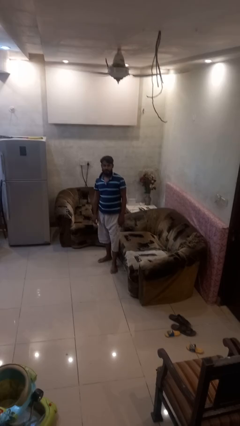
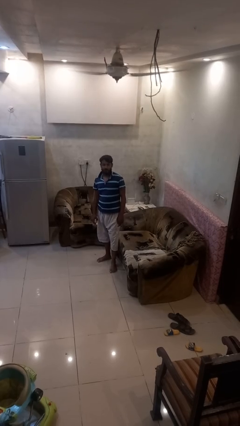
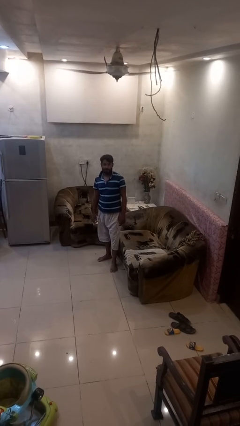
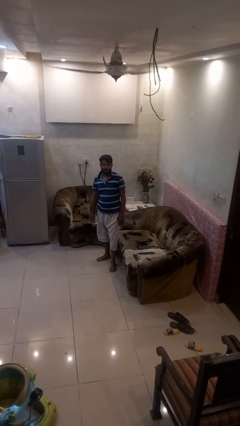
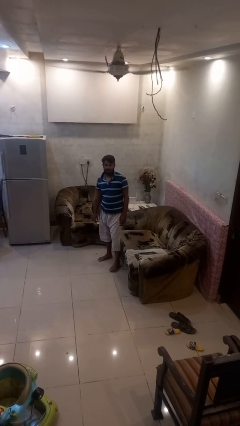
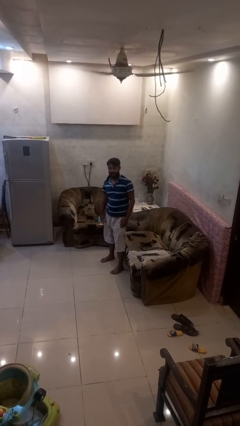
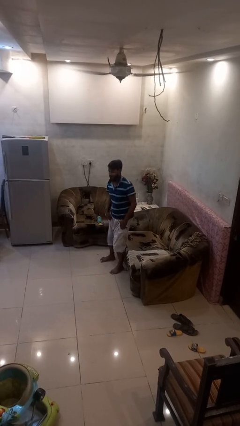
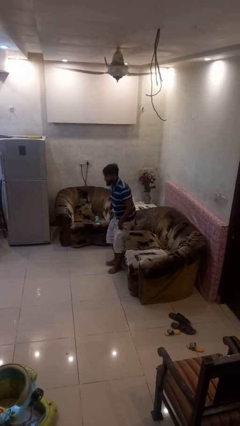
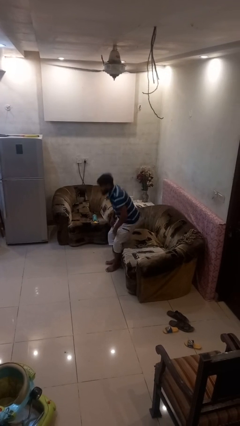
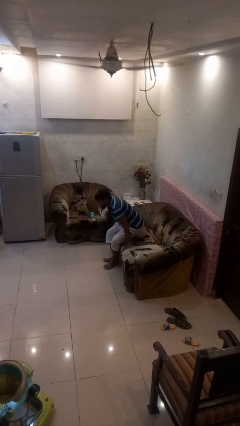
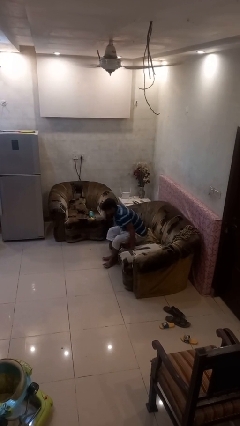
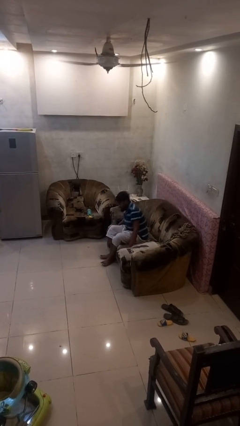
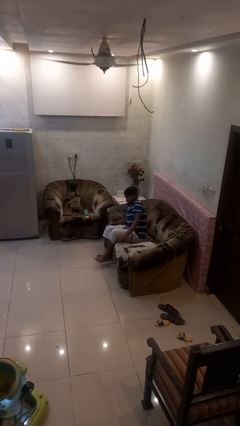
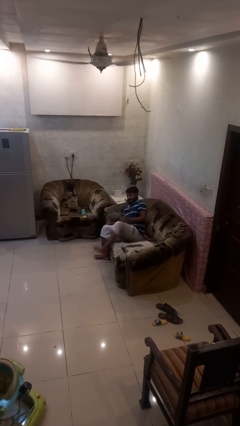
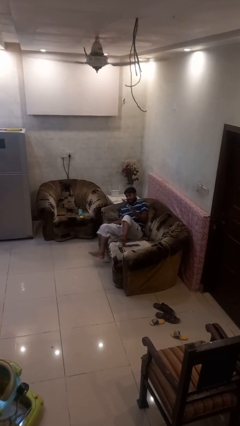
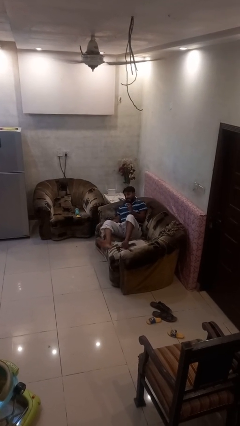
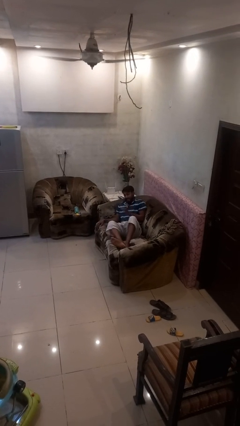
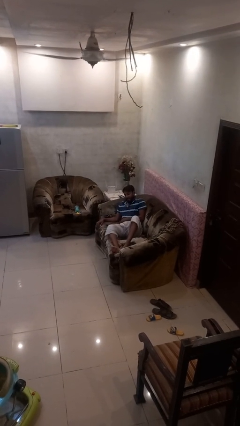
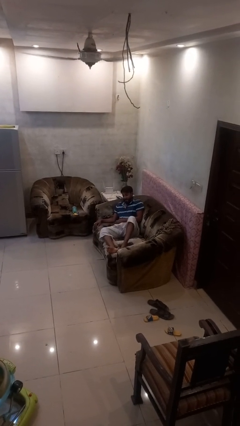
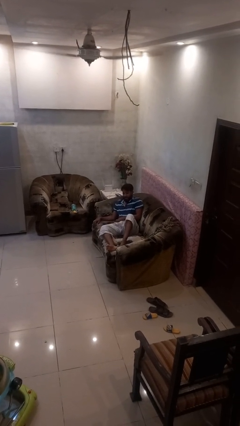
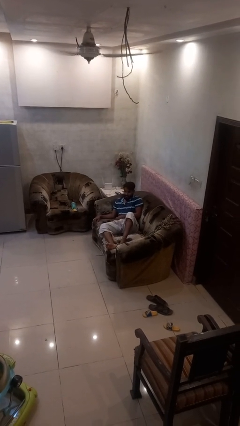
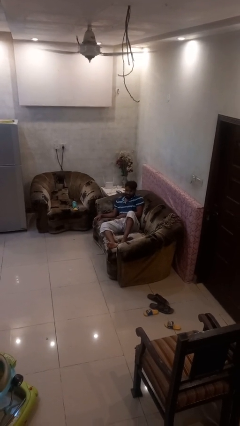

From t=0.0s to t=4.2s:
person lies down on couch

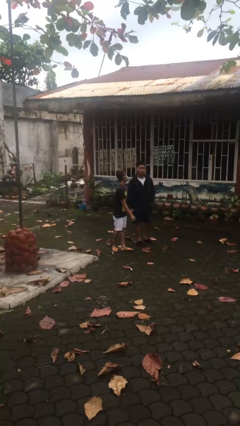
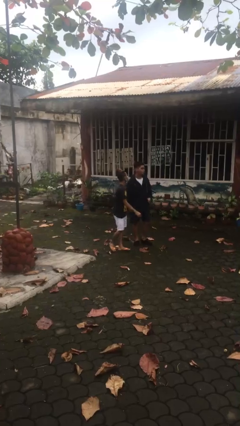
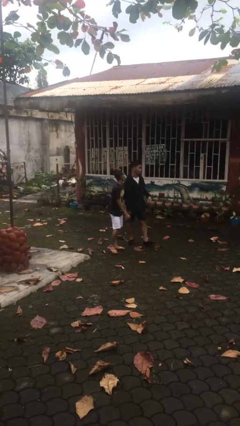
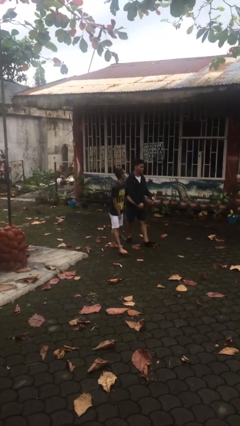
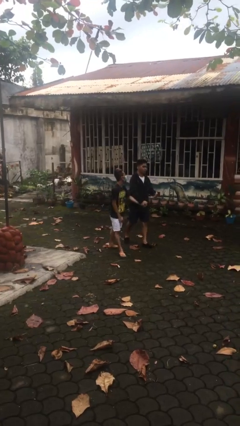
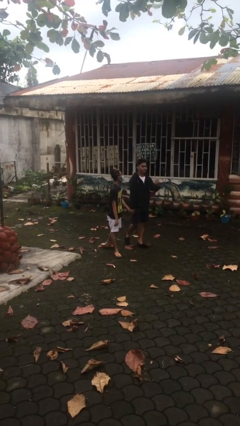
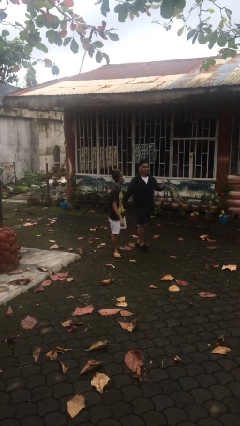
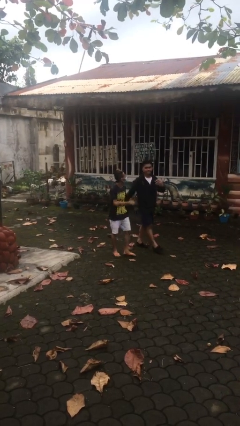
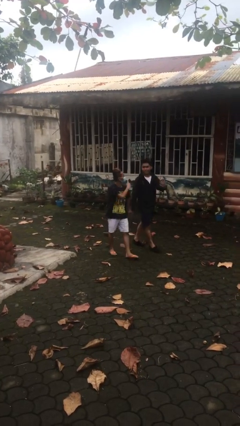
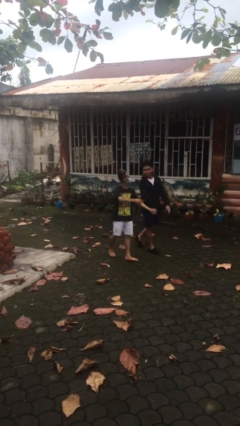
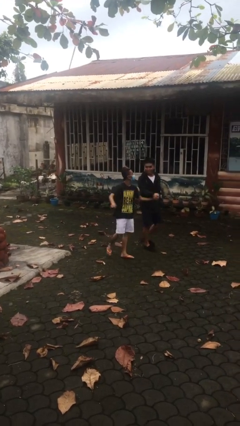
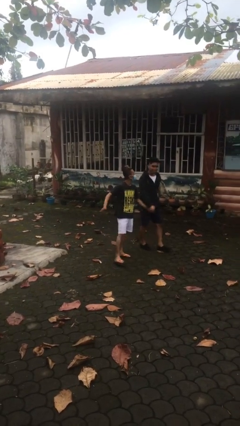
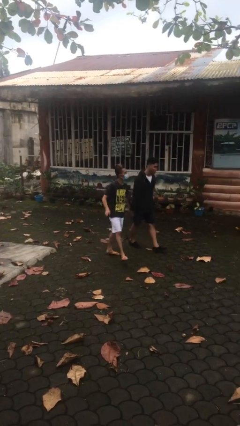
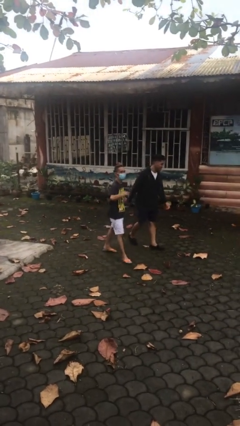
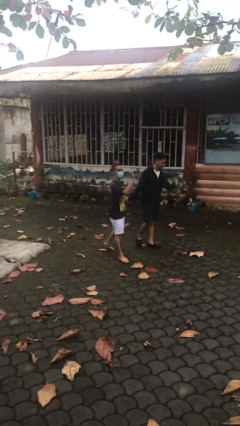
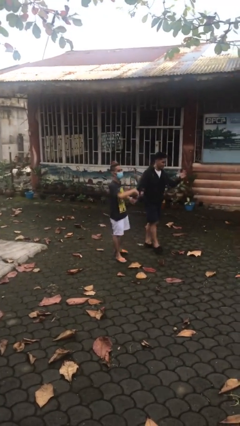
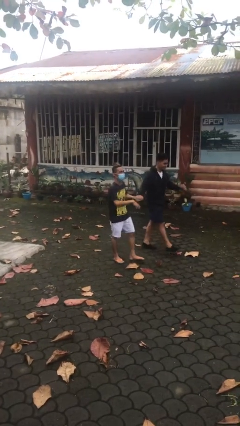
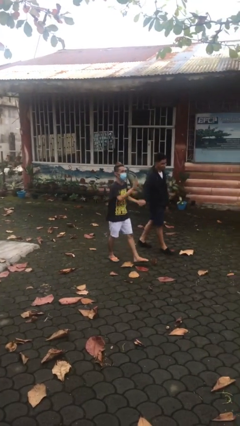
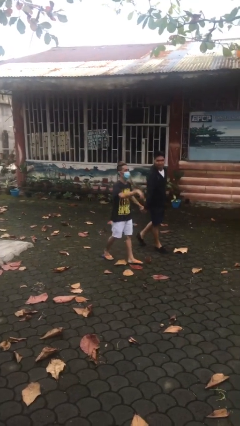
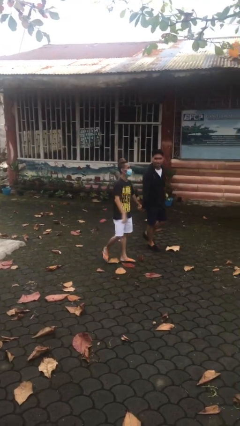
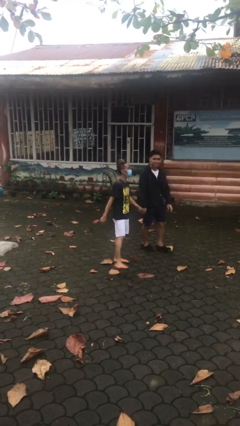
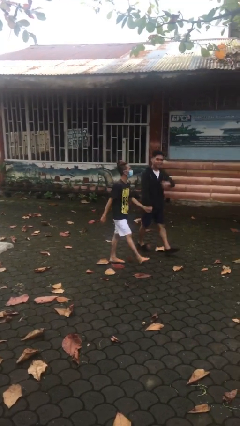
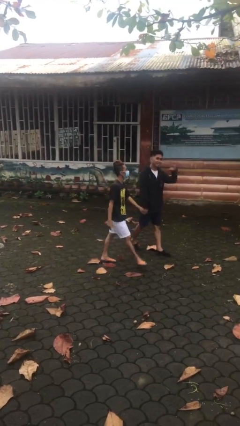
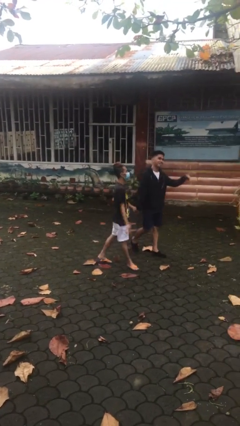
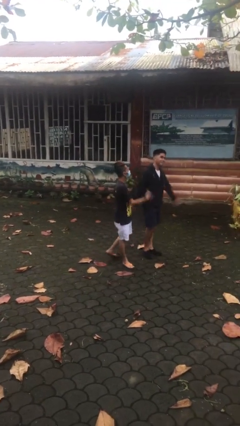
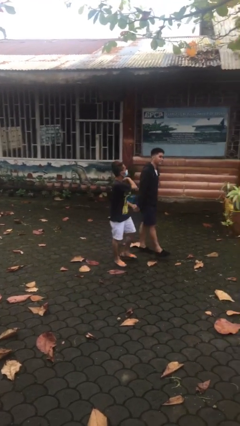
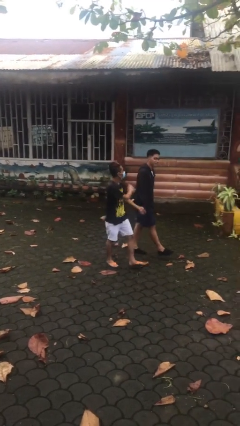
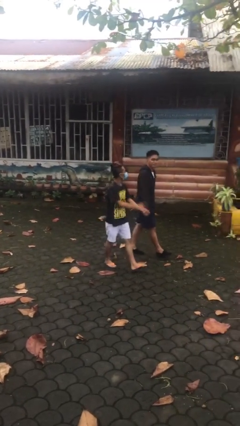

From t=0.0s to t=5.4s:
person holds hand

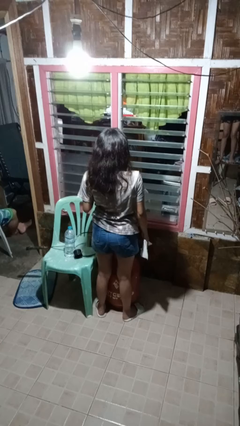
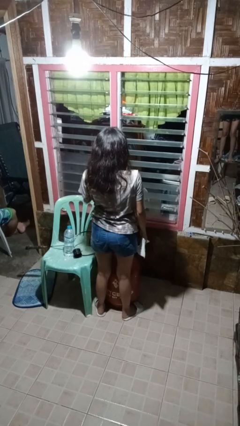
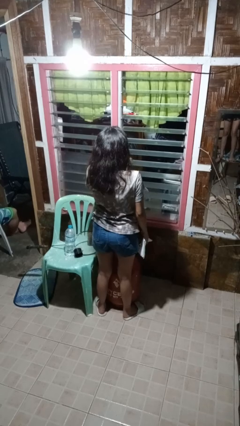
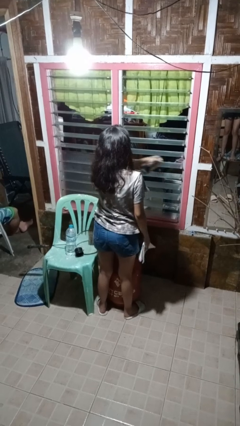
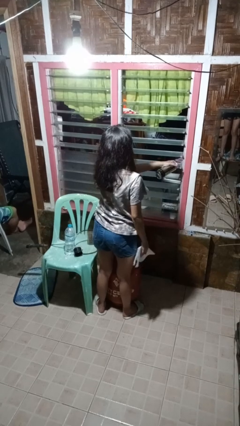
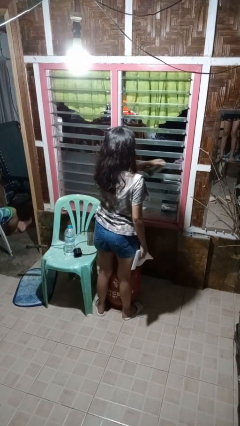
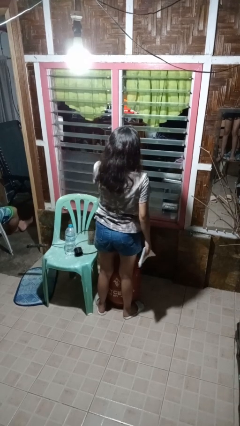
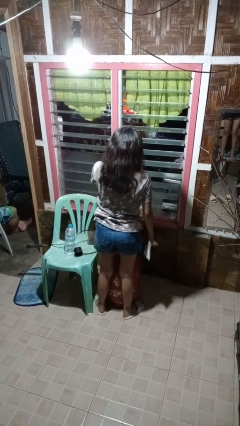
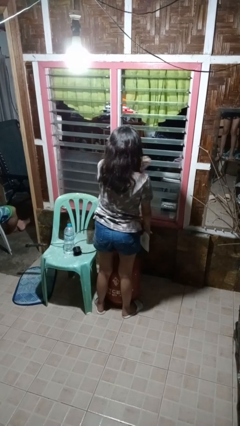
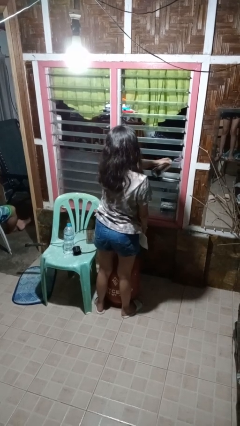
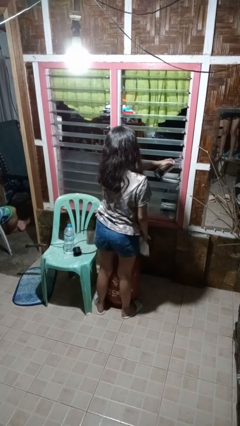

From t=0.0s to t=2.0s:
person sprays from bottle

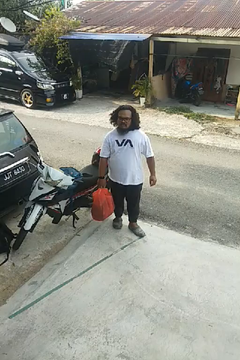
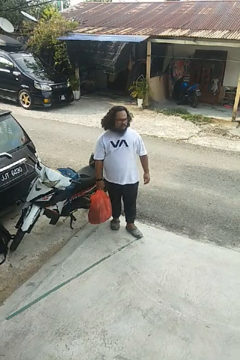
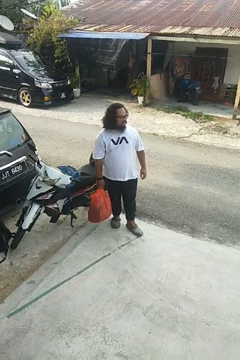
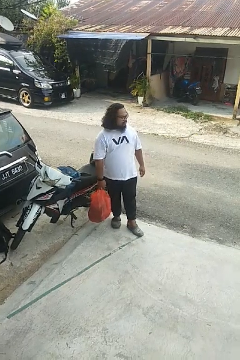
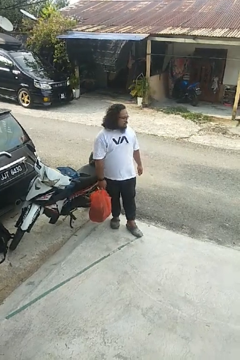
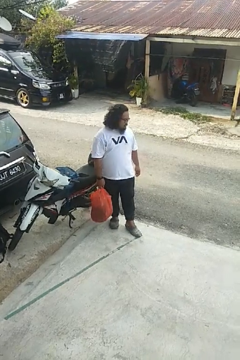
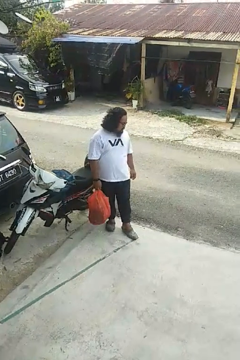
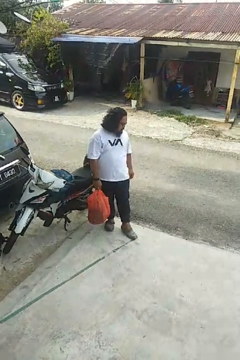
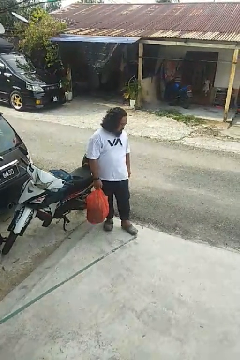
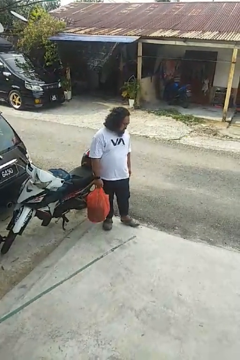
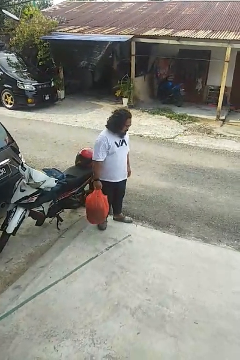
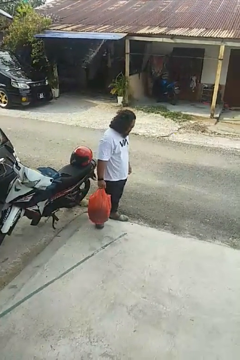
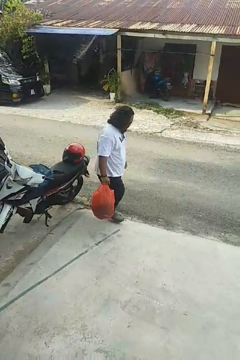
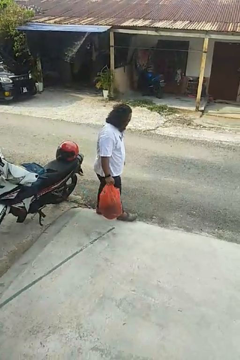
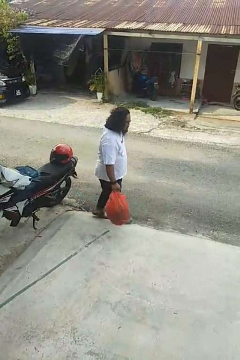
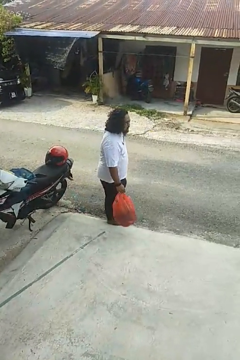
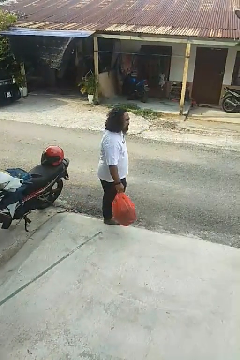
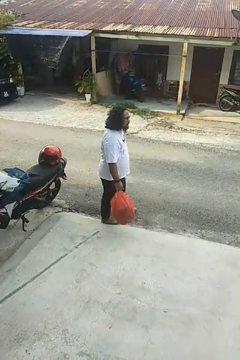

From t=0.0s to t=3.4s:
person carries groceries

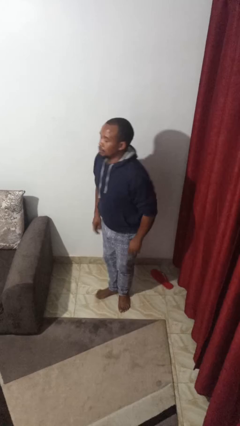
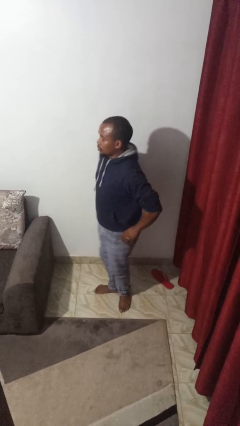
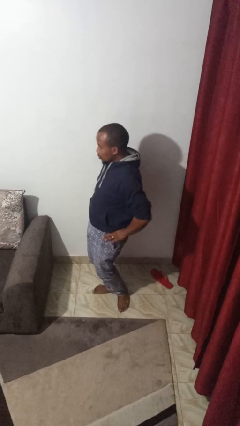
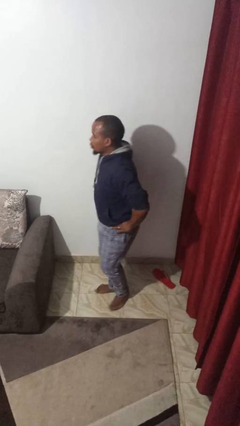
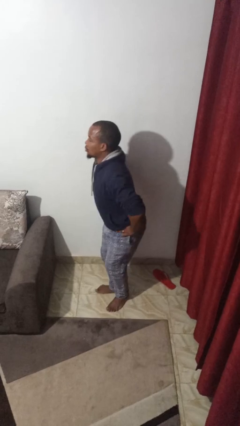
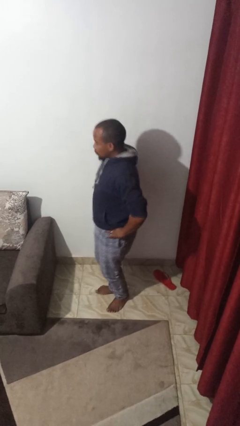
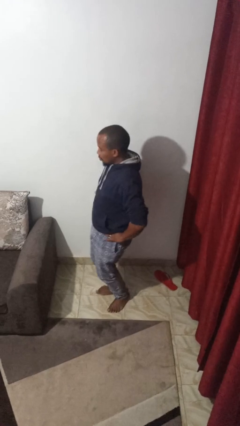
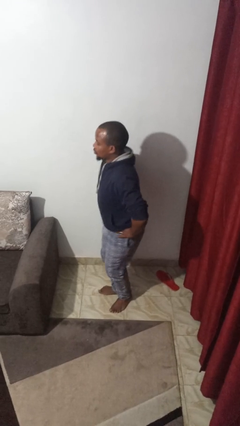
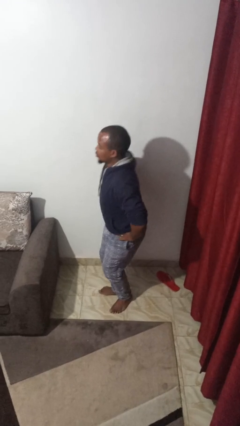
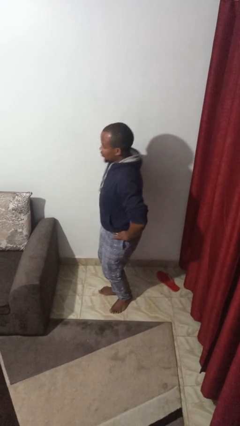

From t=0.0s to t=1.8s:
person wiggles hips

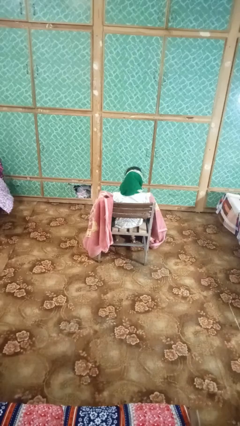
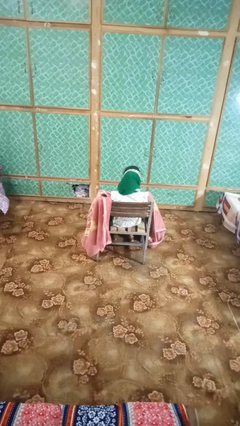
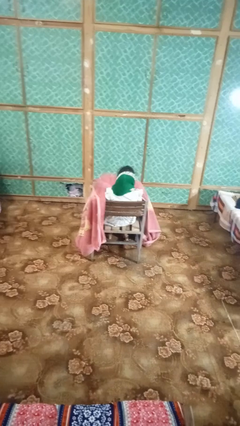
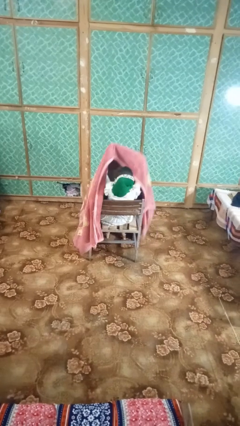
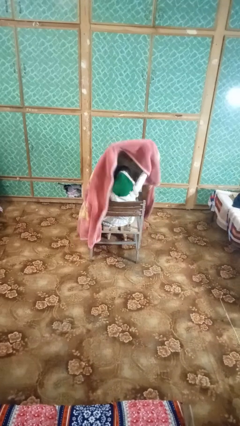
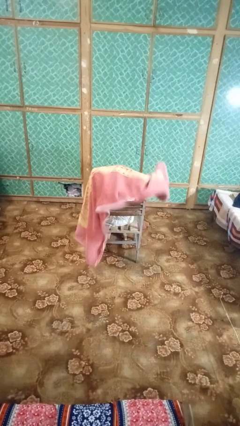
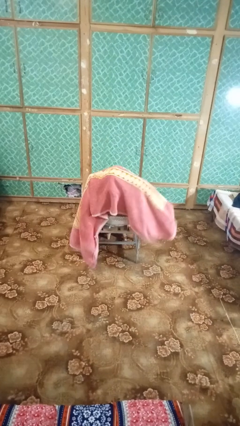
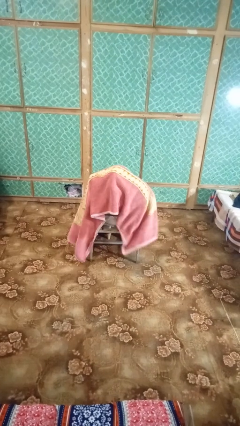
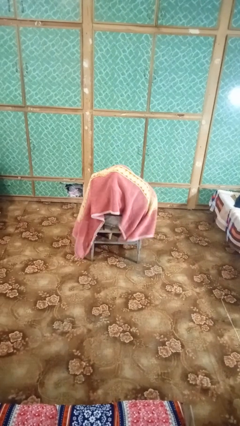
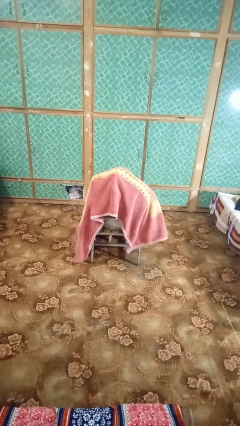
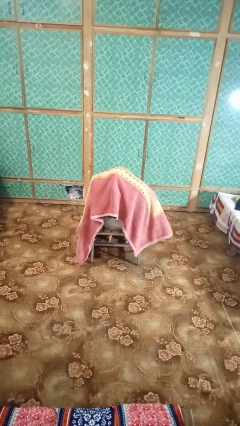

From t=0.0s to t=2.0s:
person covers with blanket
